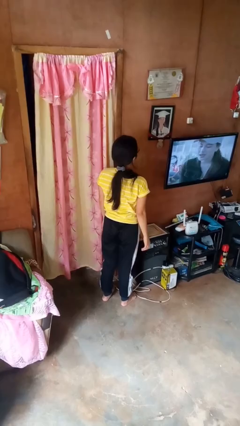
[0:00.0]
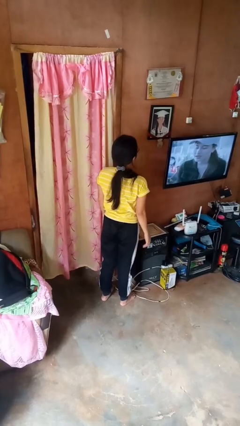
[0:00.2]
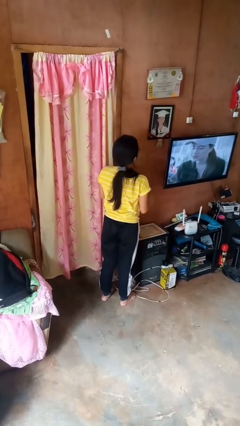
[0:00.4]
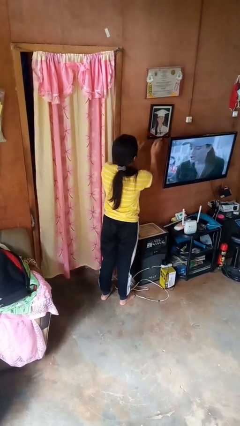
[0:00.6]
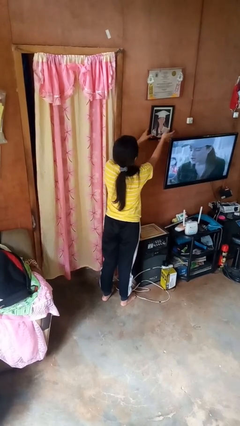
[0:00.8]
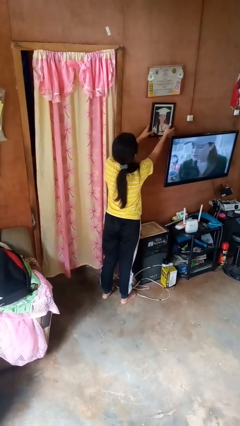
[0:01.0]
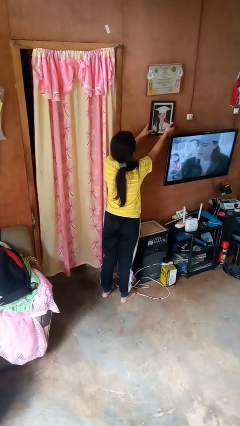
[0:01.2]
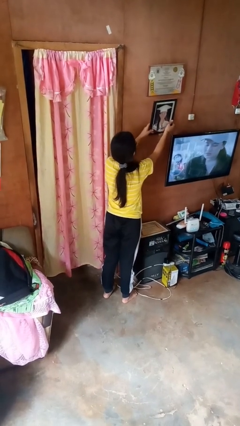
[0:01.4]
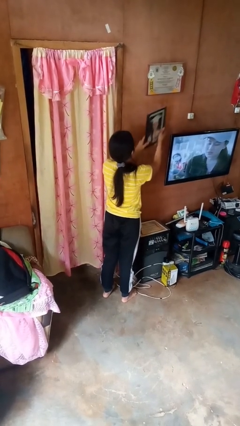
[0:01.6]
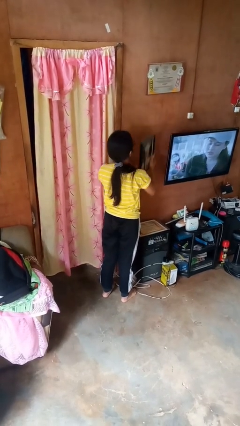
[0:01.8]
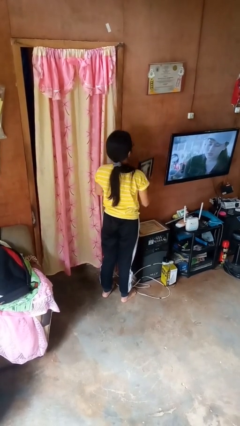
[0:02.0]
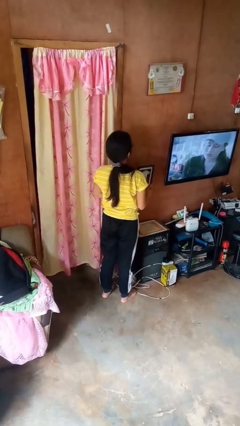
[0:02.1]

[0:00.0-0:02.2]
person takes down picture frame

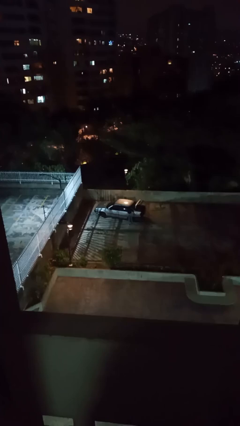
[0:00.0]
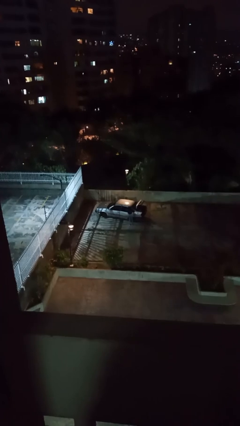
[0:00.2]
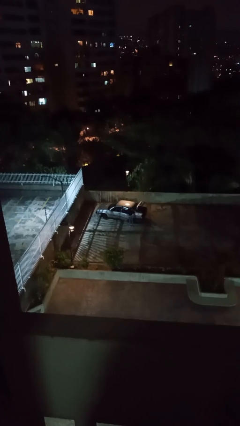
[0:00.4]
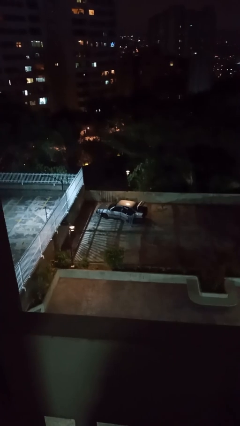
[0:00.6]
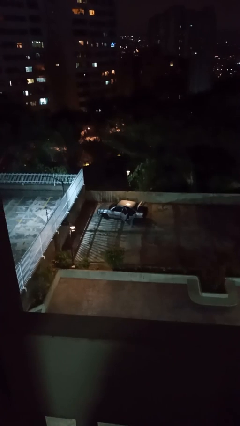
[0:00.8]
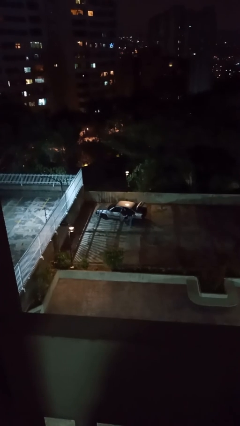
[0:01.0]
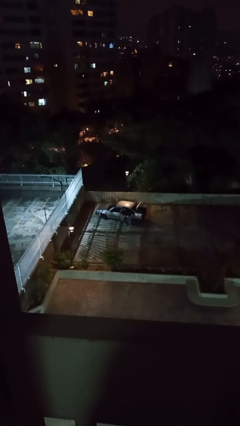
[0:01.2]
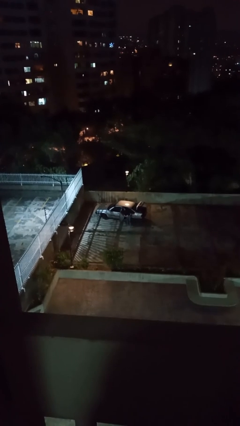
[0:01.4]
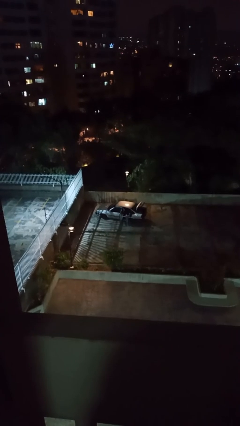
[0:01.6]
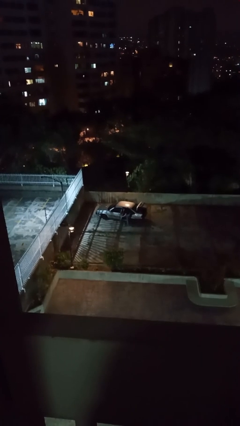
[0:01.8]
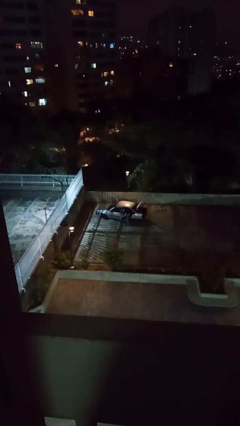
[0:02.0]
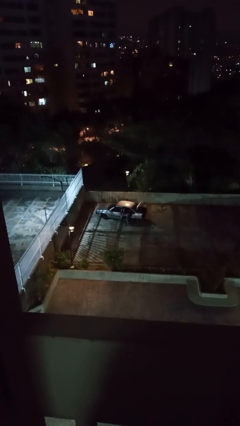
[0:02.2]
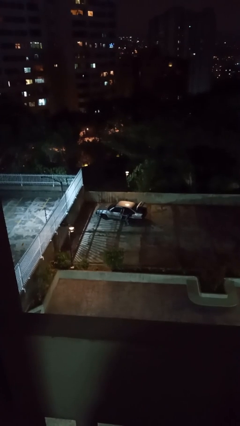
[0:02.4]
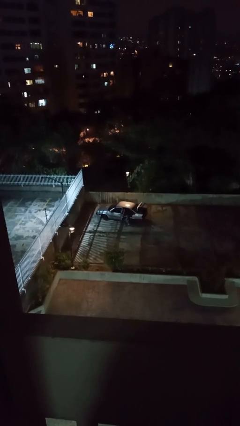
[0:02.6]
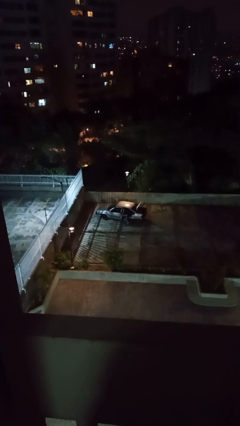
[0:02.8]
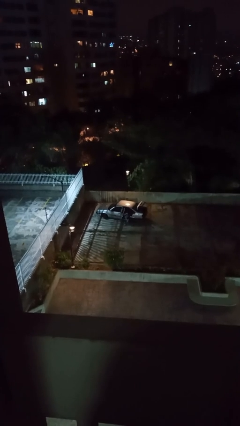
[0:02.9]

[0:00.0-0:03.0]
car picks up person

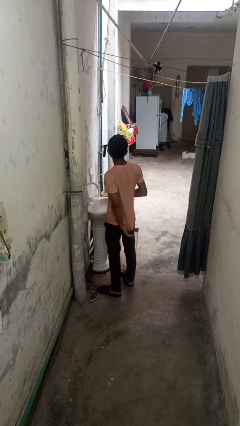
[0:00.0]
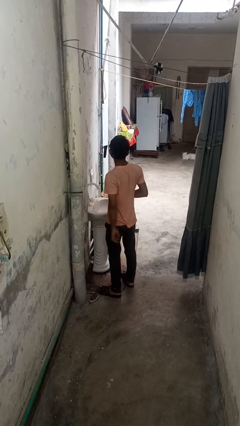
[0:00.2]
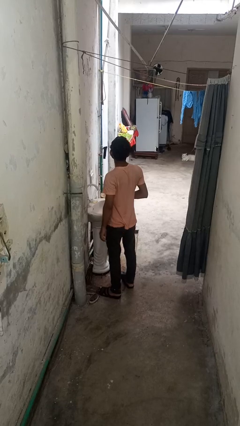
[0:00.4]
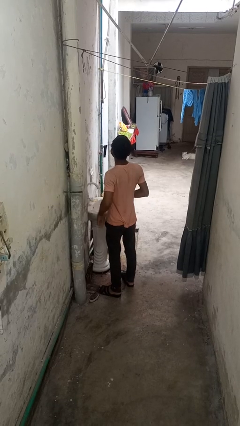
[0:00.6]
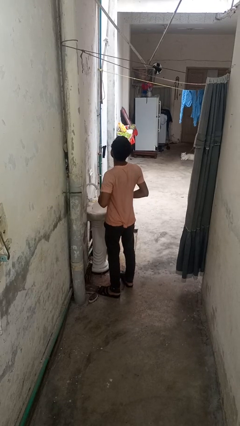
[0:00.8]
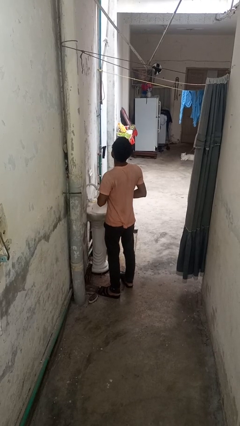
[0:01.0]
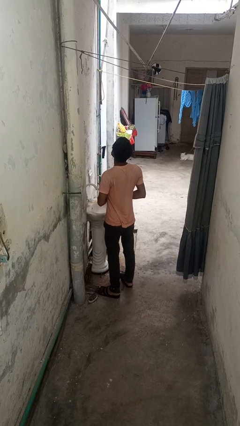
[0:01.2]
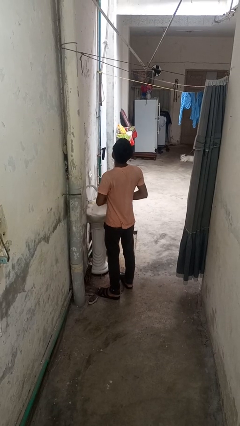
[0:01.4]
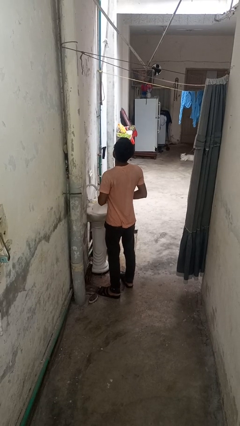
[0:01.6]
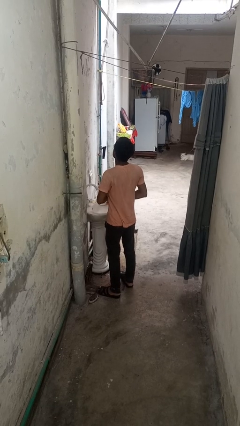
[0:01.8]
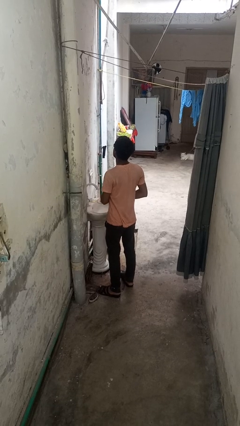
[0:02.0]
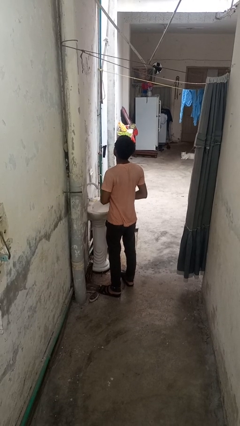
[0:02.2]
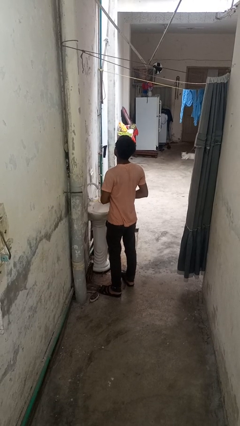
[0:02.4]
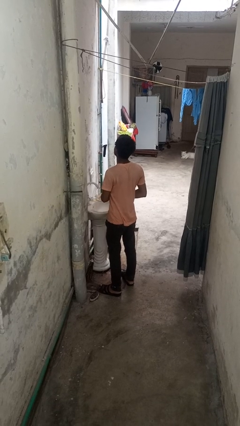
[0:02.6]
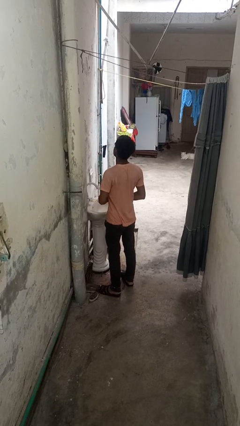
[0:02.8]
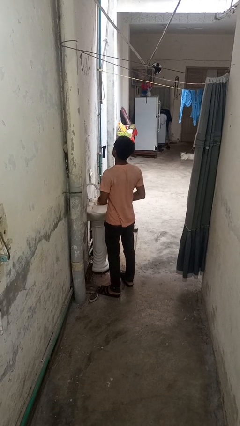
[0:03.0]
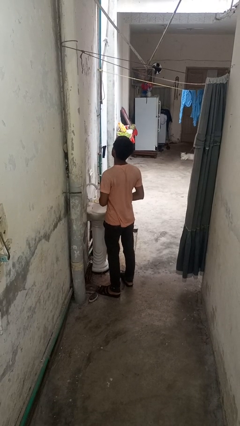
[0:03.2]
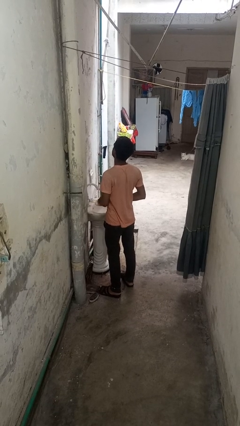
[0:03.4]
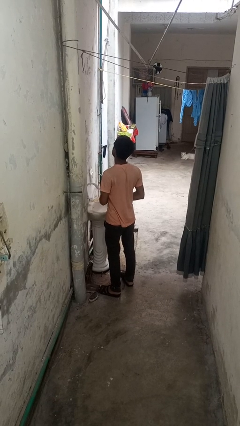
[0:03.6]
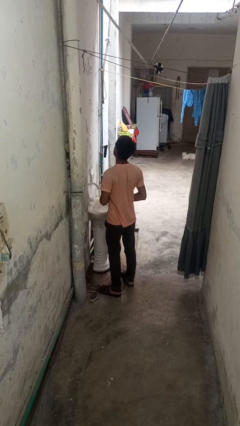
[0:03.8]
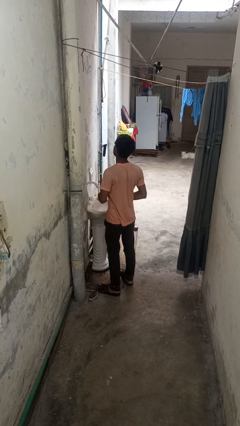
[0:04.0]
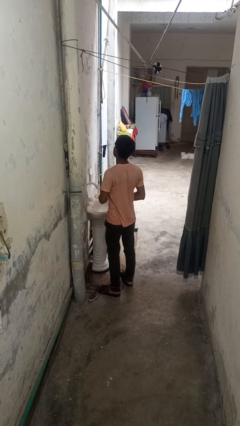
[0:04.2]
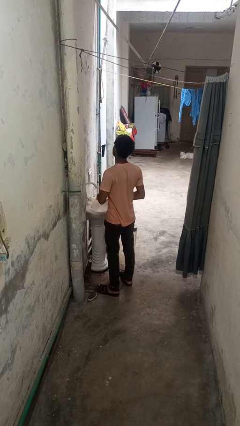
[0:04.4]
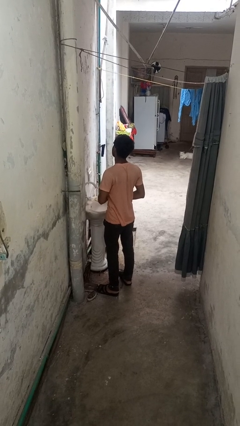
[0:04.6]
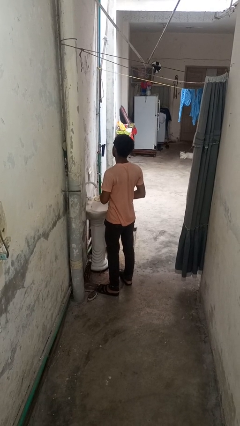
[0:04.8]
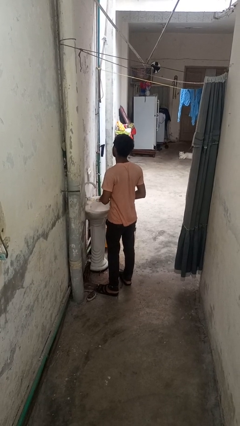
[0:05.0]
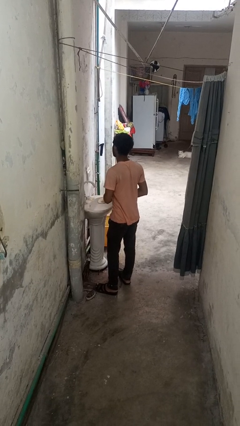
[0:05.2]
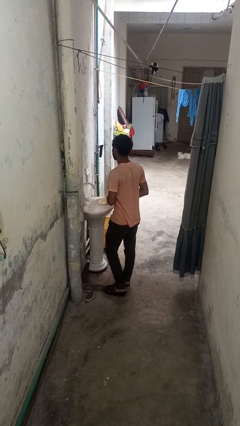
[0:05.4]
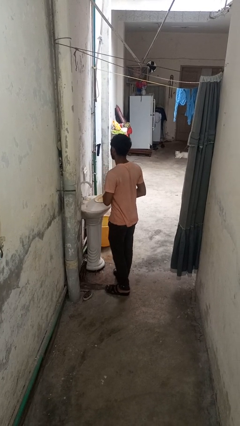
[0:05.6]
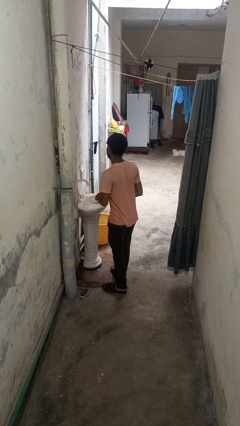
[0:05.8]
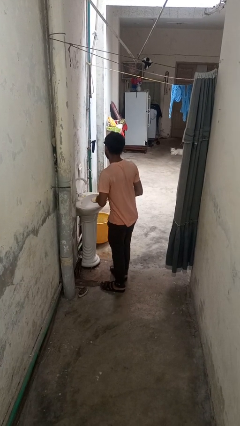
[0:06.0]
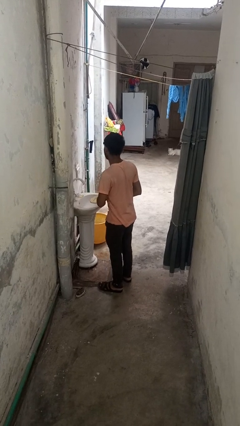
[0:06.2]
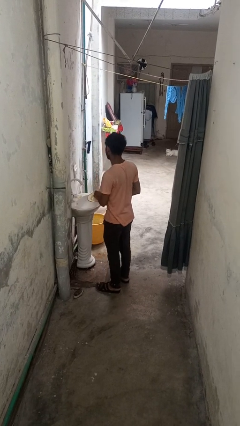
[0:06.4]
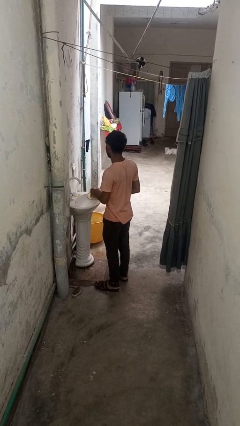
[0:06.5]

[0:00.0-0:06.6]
person dries dish

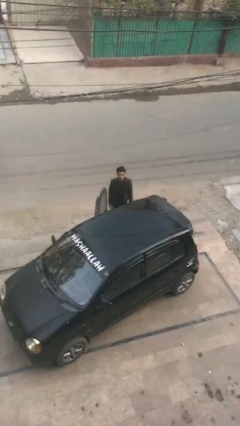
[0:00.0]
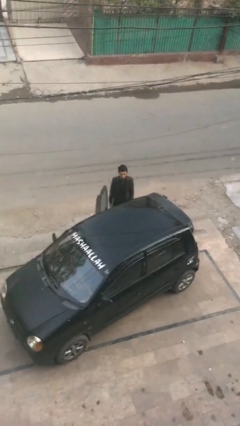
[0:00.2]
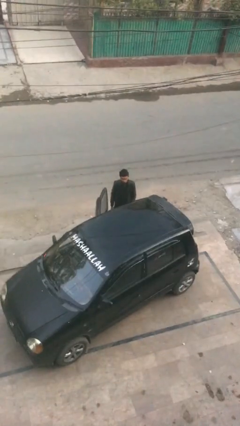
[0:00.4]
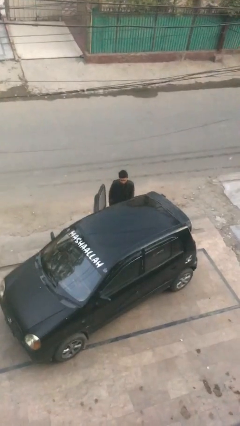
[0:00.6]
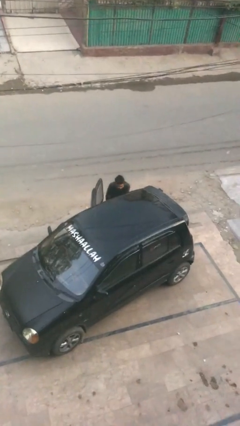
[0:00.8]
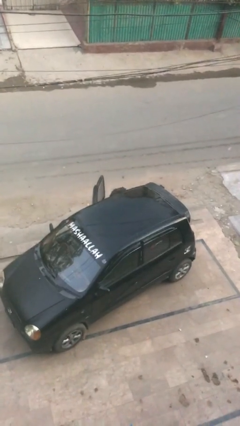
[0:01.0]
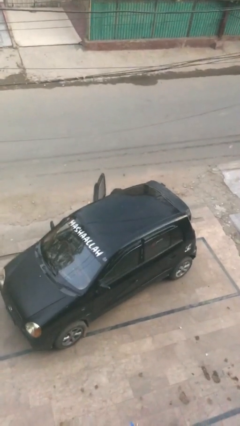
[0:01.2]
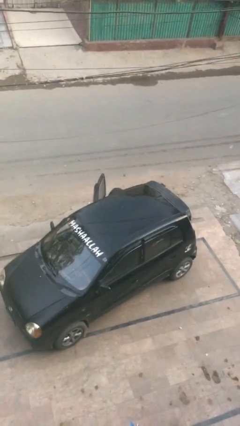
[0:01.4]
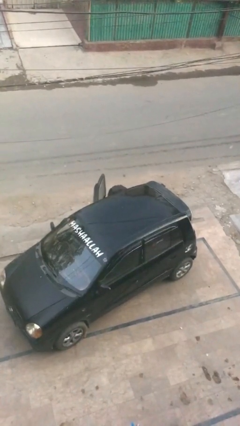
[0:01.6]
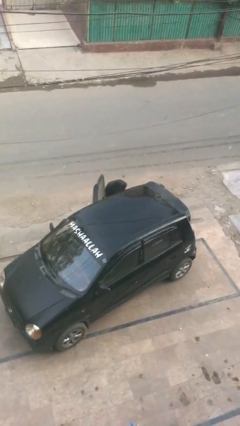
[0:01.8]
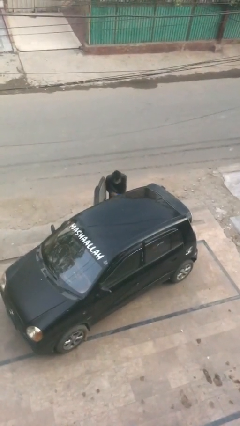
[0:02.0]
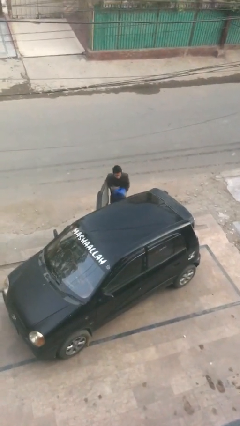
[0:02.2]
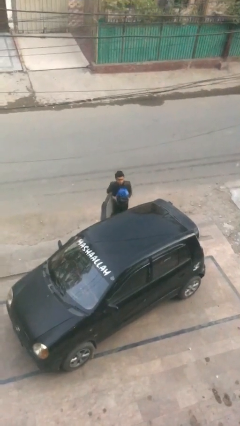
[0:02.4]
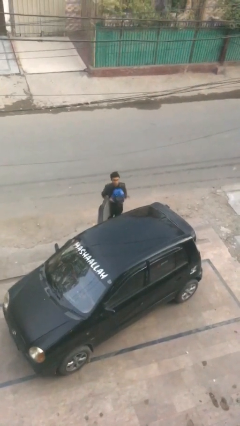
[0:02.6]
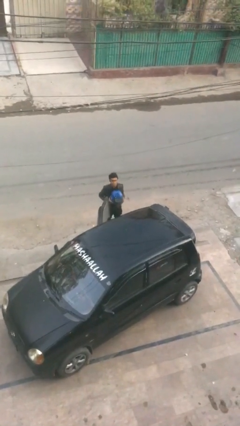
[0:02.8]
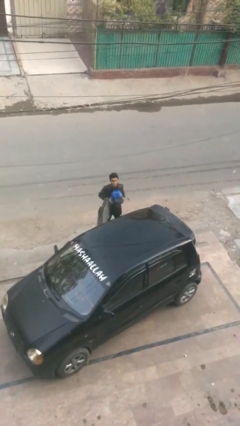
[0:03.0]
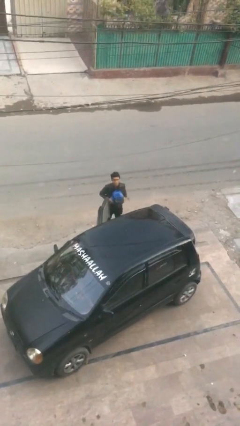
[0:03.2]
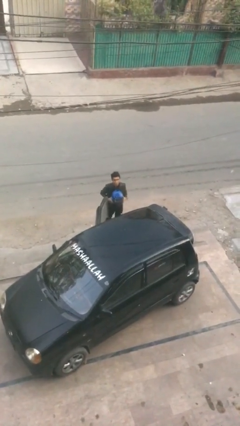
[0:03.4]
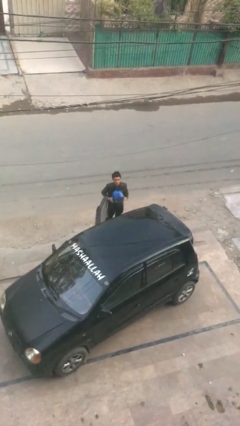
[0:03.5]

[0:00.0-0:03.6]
person unloads car

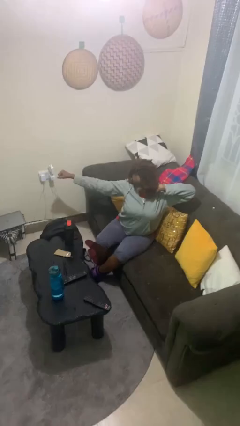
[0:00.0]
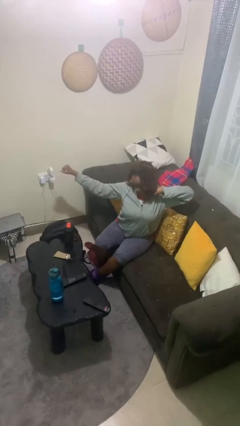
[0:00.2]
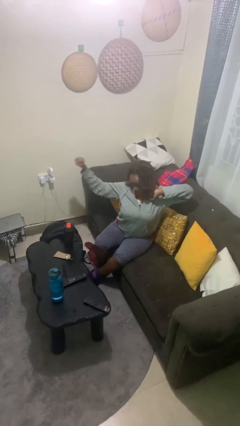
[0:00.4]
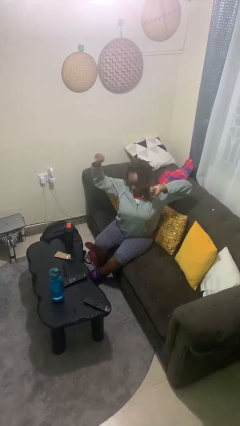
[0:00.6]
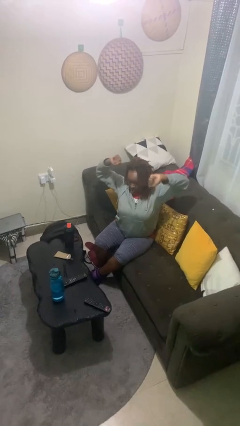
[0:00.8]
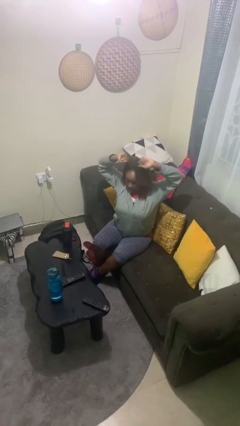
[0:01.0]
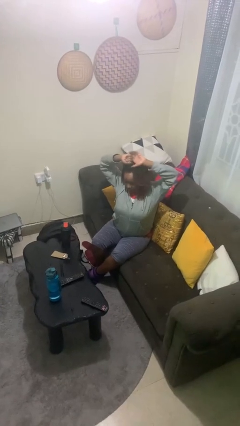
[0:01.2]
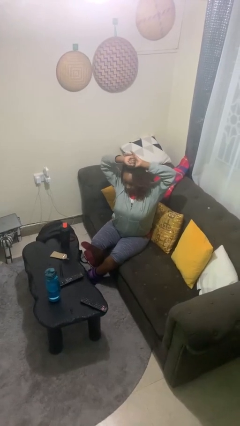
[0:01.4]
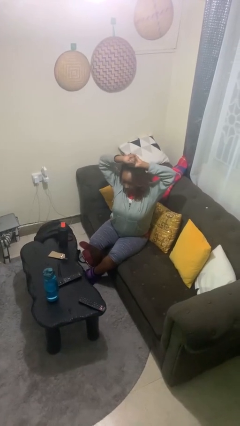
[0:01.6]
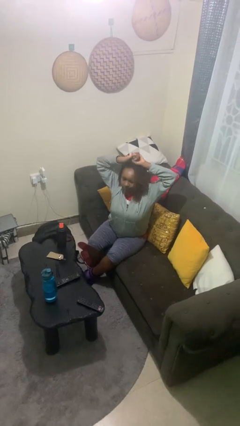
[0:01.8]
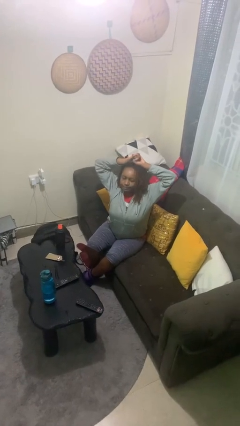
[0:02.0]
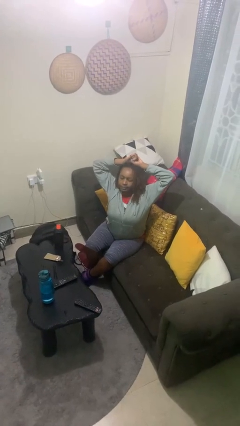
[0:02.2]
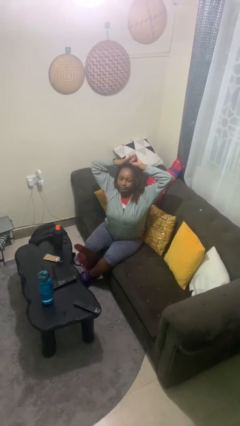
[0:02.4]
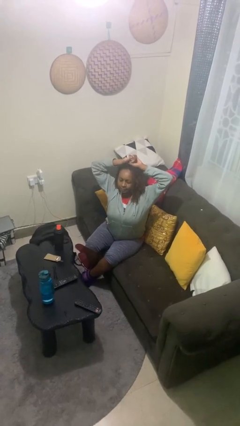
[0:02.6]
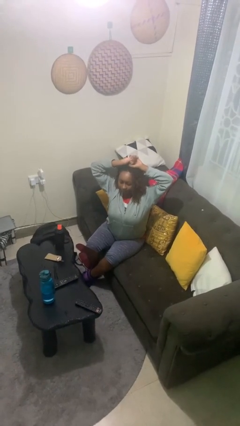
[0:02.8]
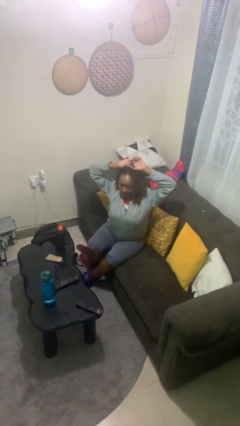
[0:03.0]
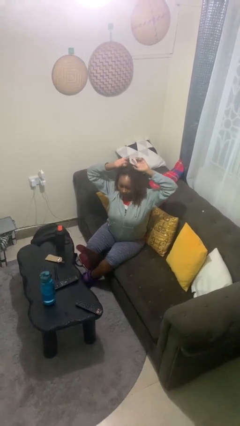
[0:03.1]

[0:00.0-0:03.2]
person stretches arms over head
